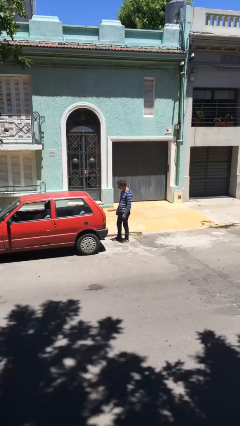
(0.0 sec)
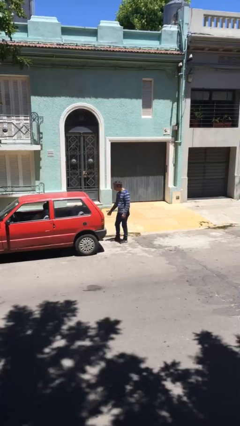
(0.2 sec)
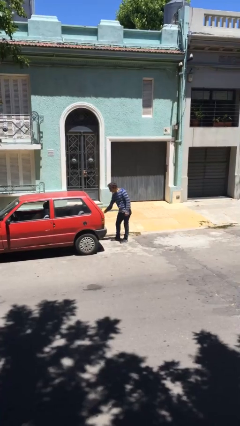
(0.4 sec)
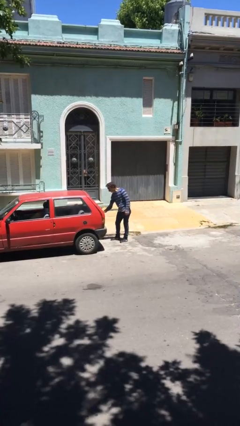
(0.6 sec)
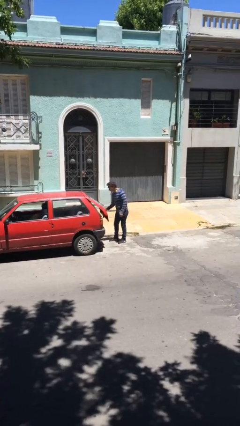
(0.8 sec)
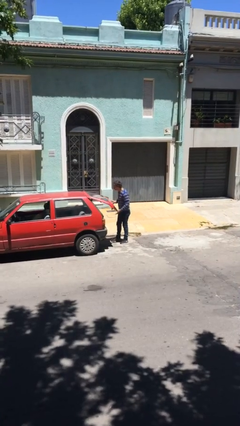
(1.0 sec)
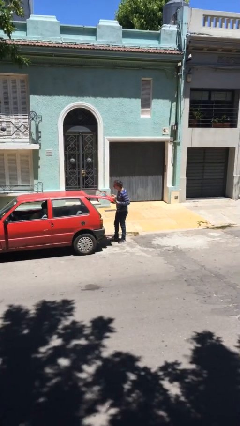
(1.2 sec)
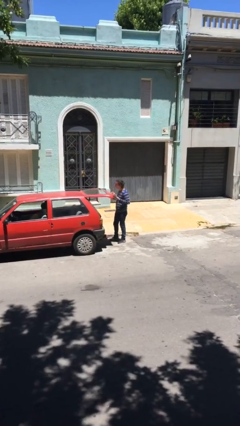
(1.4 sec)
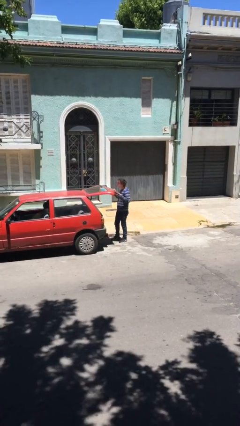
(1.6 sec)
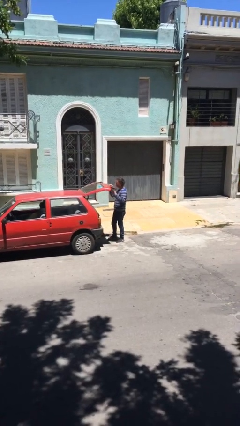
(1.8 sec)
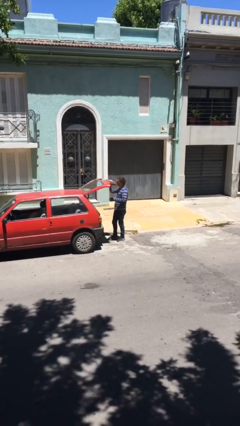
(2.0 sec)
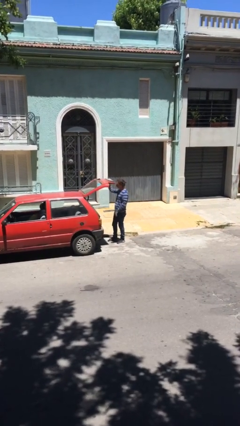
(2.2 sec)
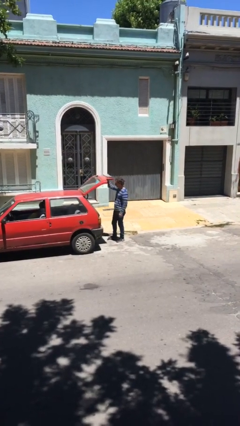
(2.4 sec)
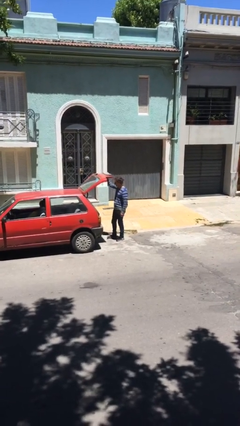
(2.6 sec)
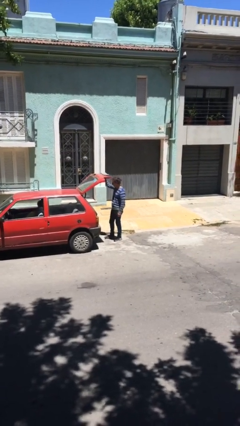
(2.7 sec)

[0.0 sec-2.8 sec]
person opens car trunk

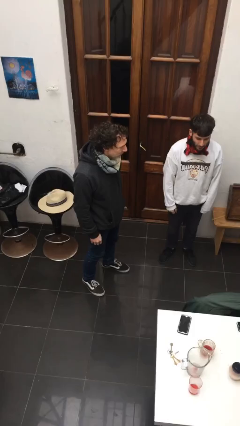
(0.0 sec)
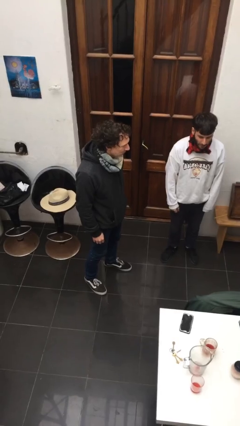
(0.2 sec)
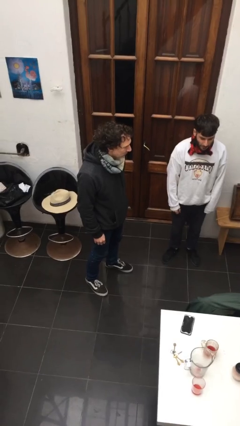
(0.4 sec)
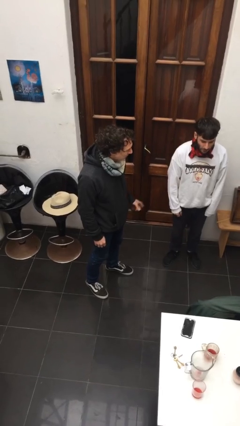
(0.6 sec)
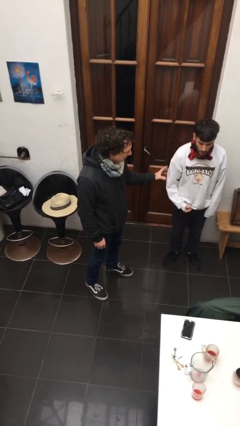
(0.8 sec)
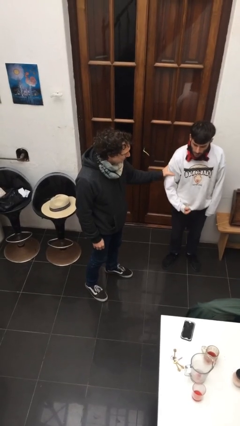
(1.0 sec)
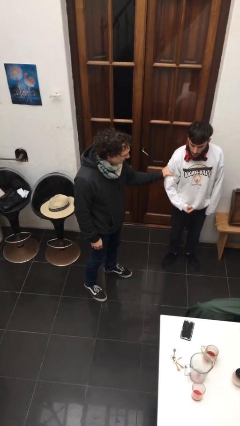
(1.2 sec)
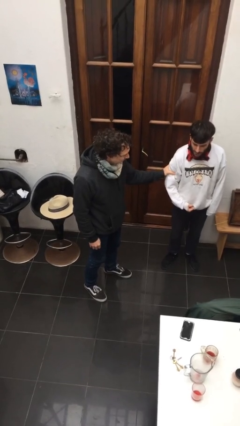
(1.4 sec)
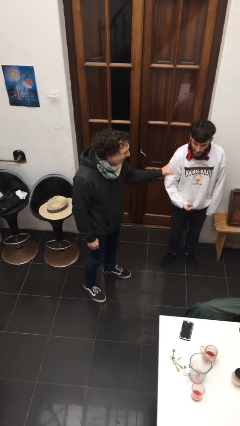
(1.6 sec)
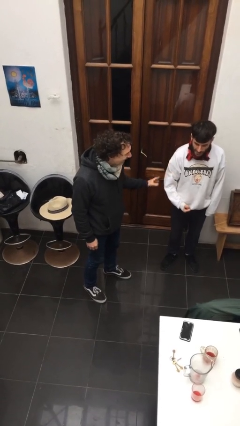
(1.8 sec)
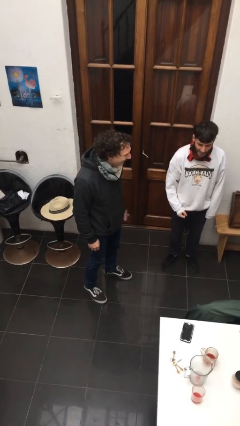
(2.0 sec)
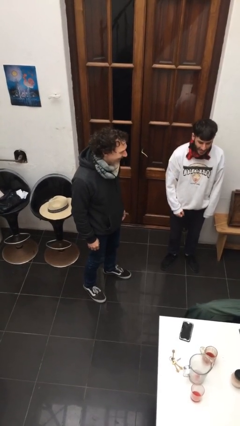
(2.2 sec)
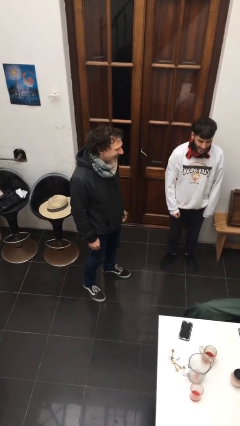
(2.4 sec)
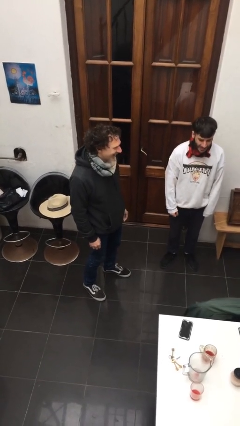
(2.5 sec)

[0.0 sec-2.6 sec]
person grabs person by bicep

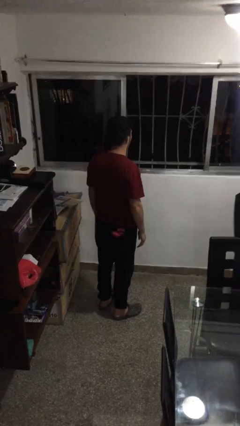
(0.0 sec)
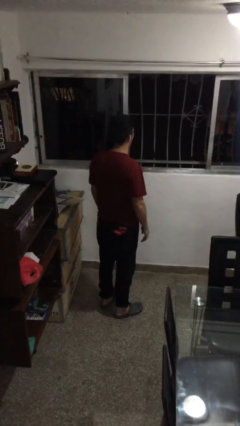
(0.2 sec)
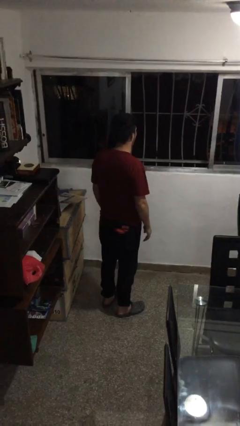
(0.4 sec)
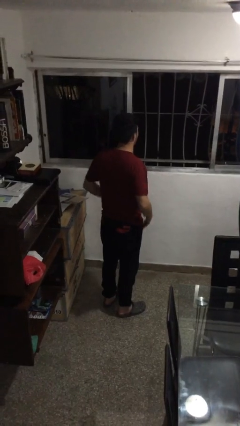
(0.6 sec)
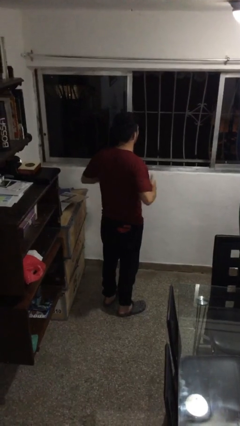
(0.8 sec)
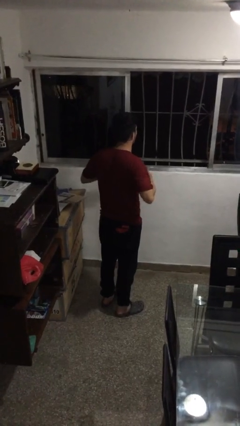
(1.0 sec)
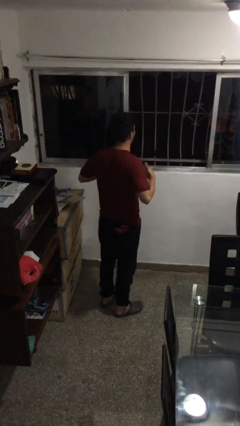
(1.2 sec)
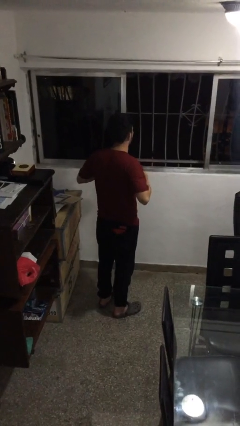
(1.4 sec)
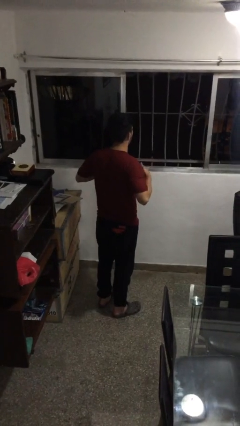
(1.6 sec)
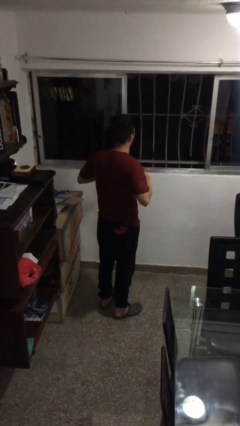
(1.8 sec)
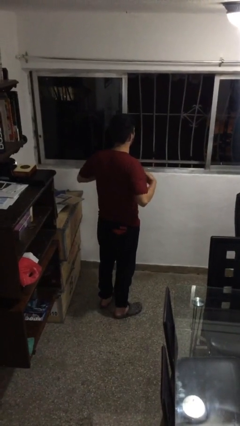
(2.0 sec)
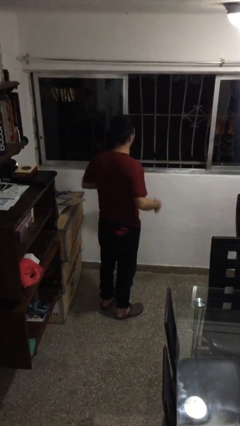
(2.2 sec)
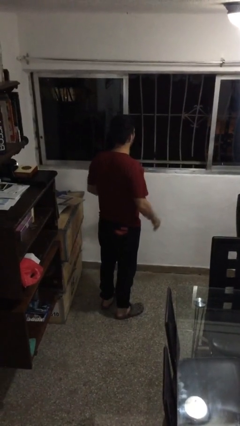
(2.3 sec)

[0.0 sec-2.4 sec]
person drums on chest

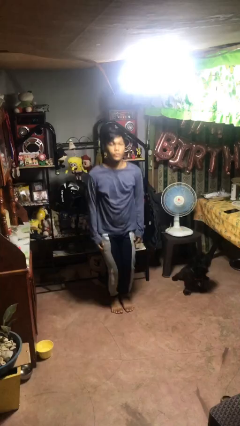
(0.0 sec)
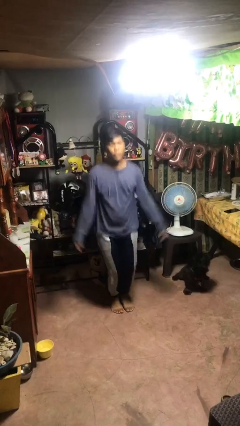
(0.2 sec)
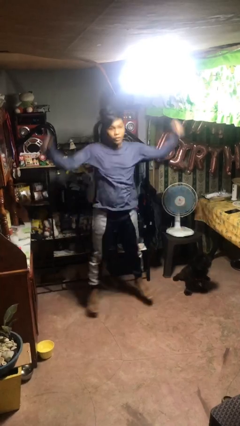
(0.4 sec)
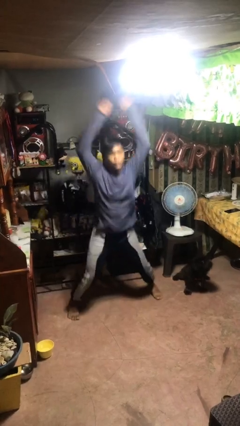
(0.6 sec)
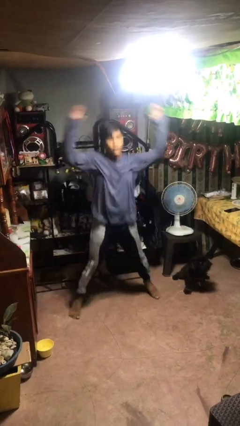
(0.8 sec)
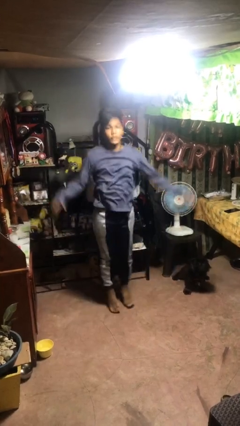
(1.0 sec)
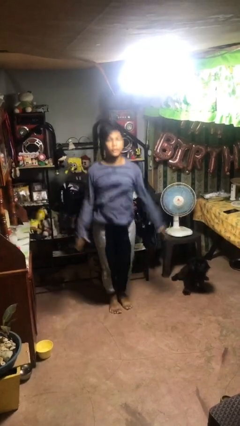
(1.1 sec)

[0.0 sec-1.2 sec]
person exercises with jumping jacks

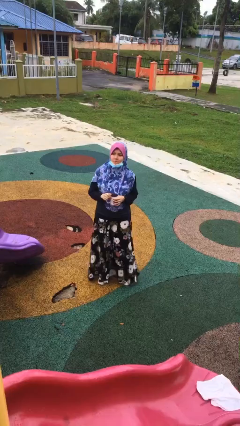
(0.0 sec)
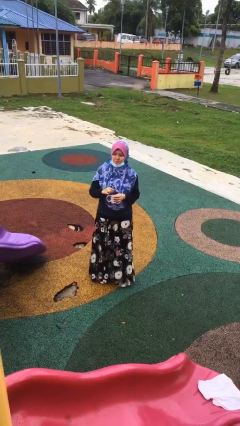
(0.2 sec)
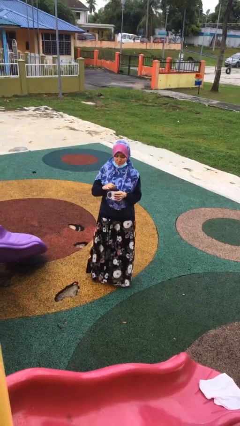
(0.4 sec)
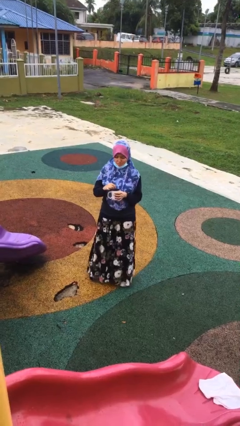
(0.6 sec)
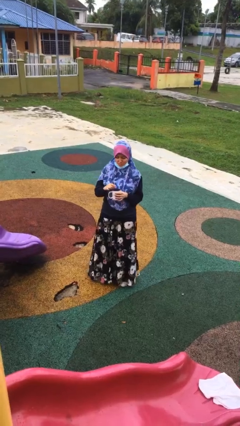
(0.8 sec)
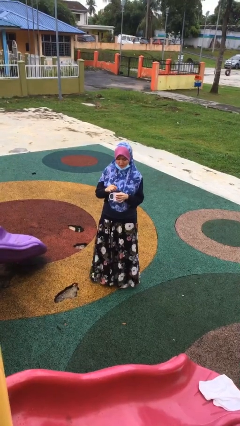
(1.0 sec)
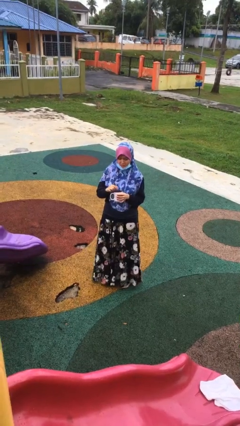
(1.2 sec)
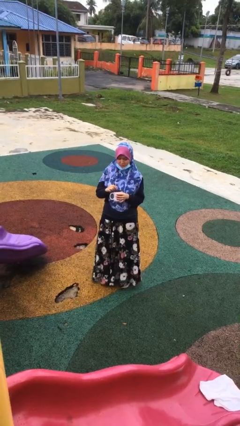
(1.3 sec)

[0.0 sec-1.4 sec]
person stirs mug

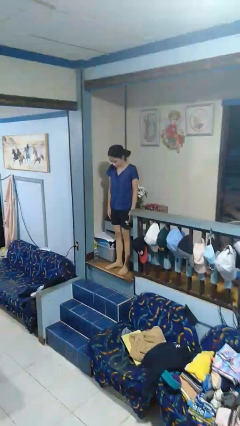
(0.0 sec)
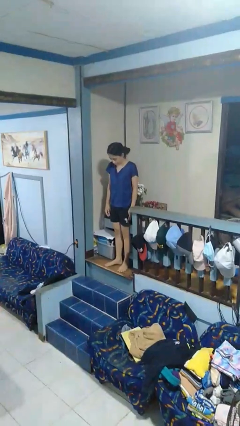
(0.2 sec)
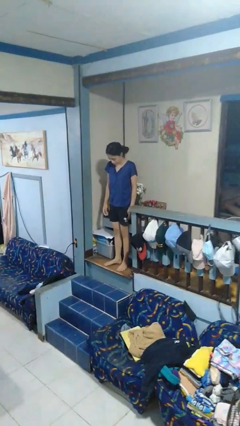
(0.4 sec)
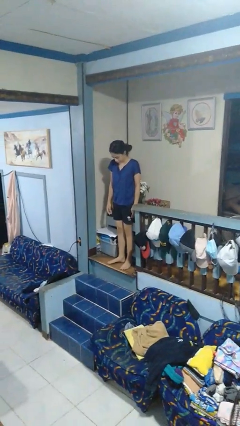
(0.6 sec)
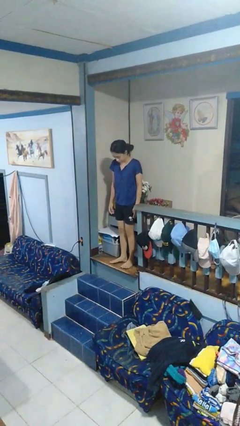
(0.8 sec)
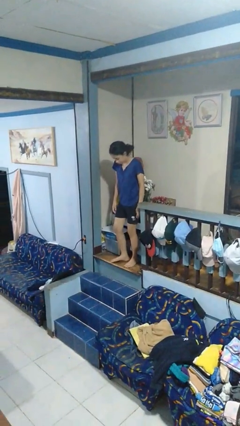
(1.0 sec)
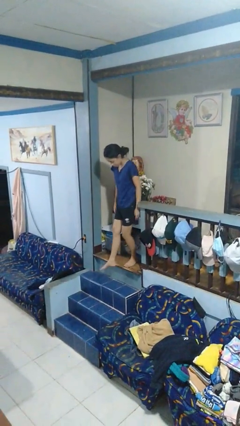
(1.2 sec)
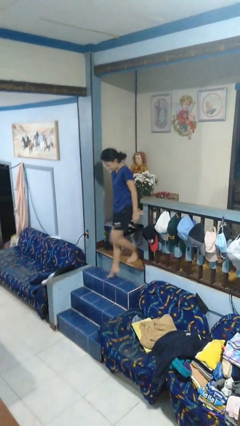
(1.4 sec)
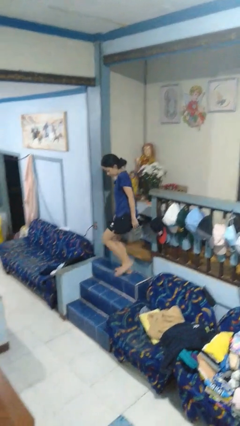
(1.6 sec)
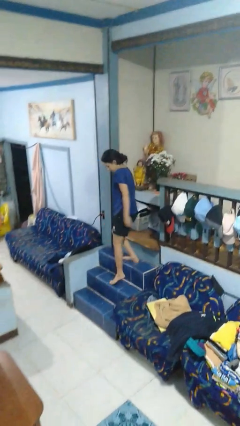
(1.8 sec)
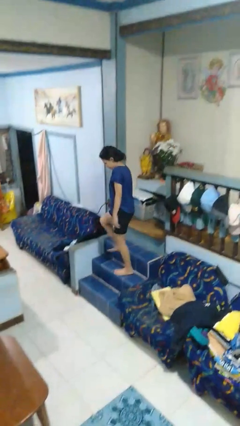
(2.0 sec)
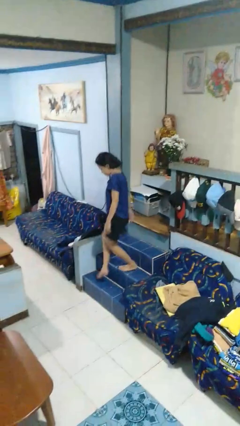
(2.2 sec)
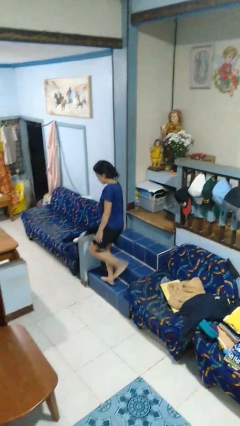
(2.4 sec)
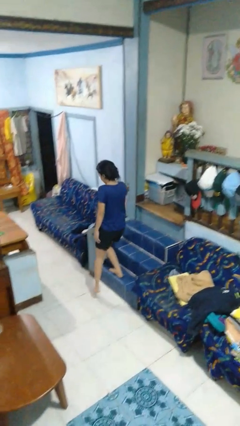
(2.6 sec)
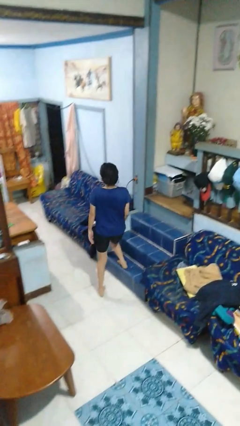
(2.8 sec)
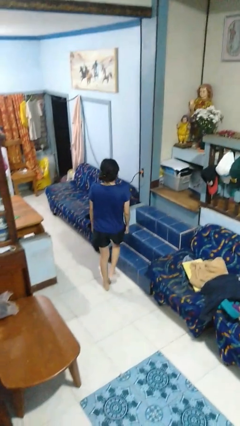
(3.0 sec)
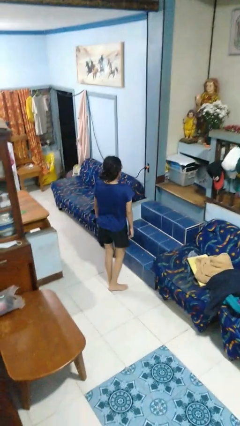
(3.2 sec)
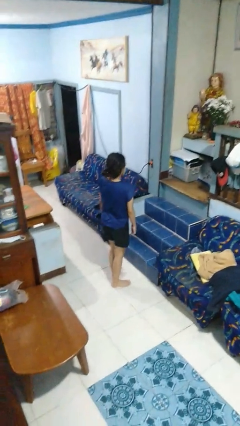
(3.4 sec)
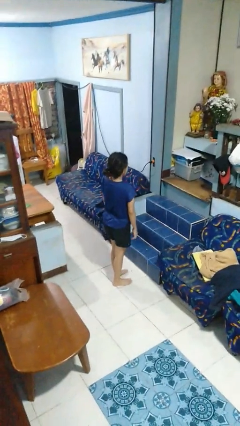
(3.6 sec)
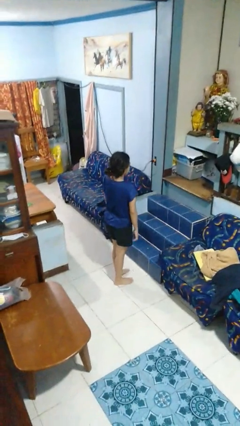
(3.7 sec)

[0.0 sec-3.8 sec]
person climbs down stairs

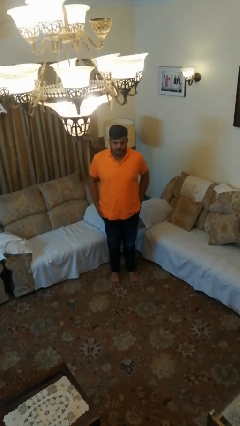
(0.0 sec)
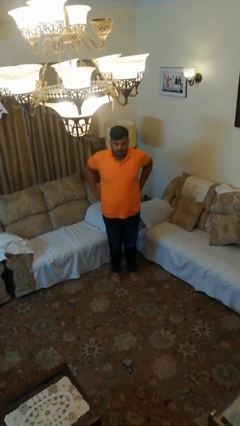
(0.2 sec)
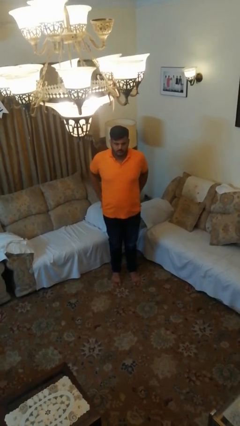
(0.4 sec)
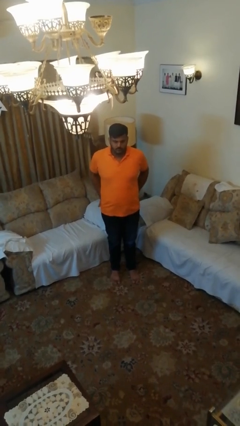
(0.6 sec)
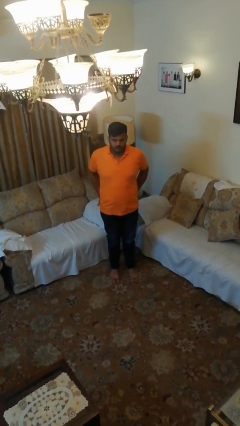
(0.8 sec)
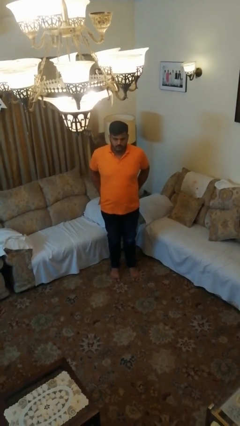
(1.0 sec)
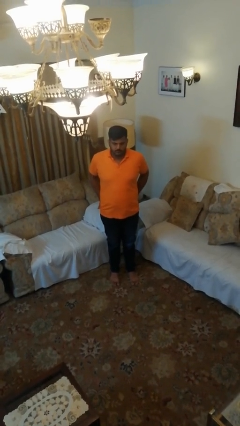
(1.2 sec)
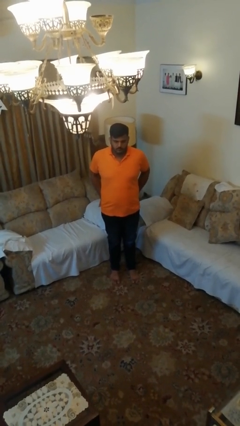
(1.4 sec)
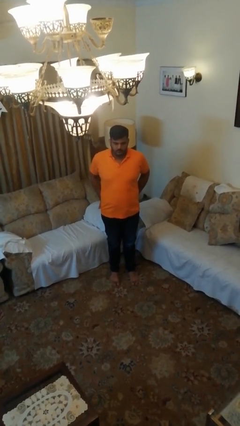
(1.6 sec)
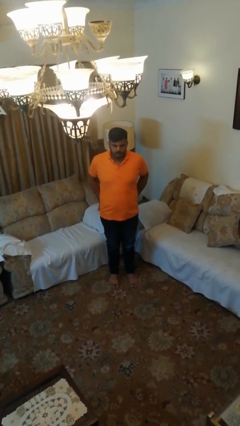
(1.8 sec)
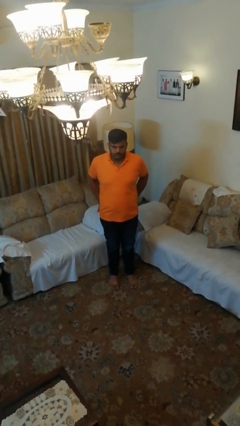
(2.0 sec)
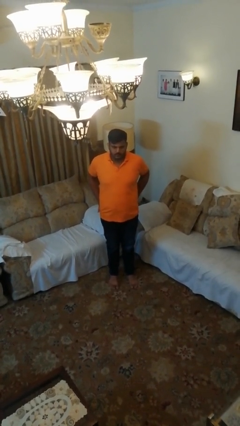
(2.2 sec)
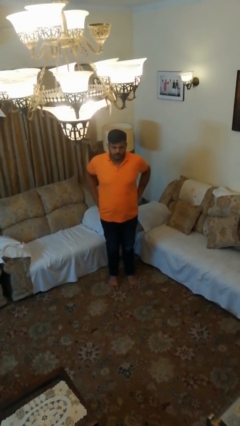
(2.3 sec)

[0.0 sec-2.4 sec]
person puts hands in back pockets
